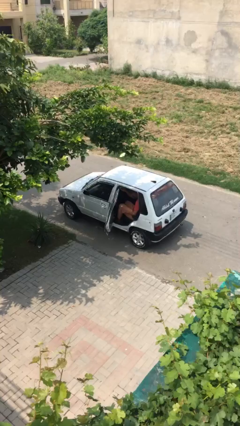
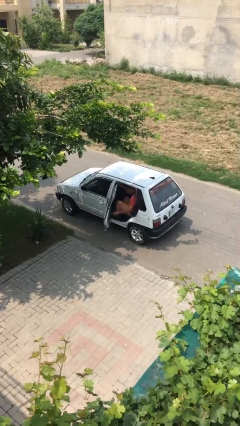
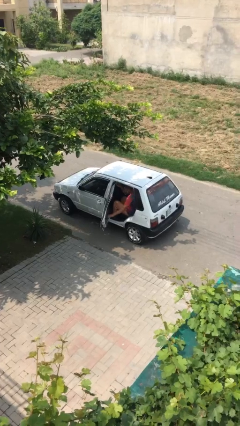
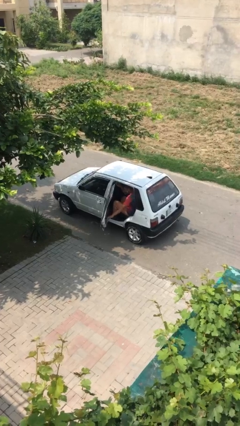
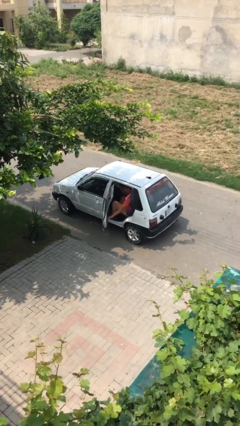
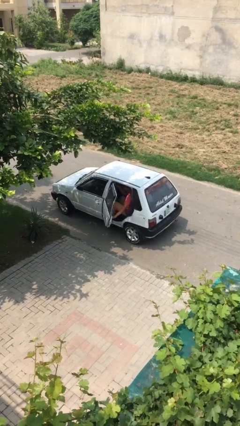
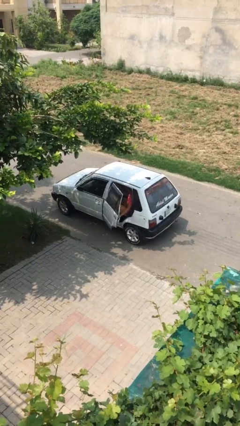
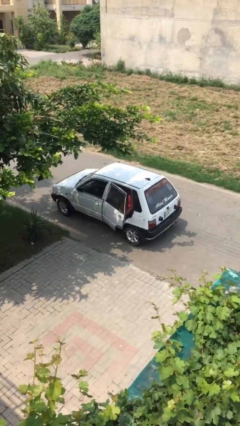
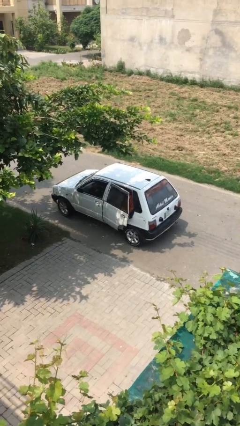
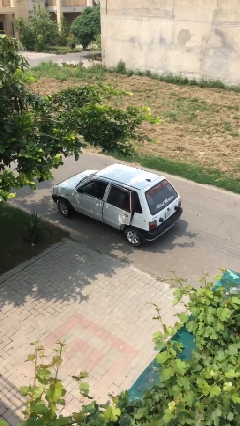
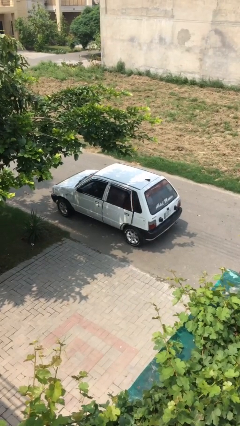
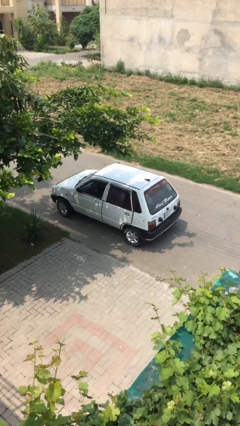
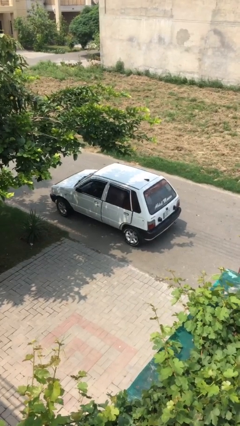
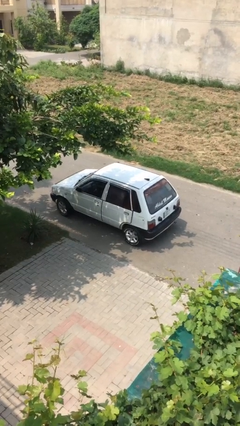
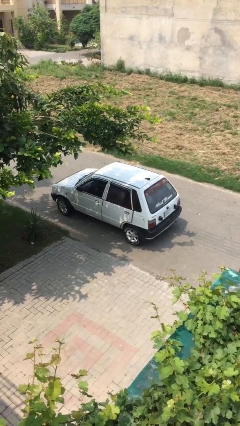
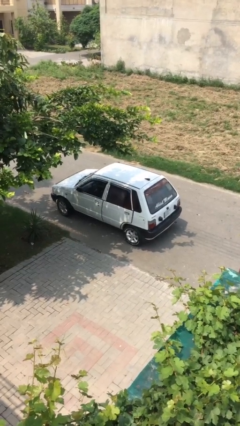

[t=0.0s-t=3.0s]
person closes car door

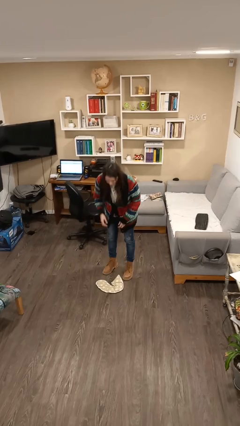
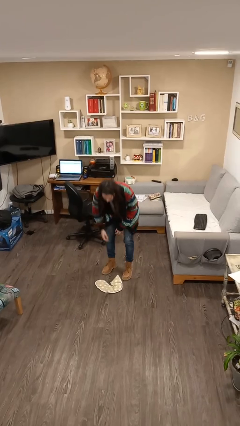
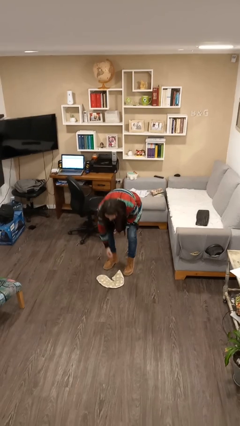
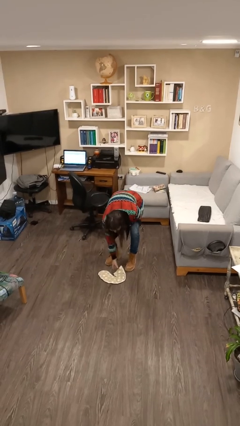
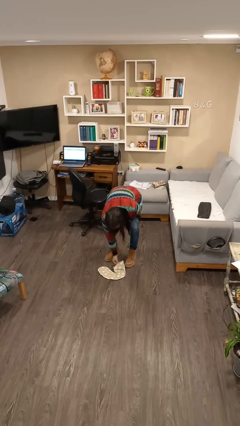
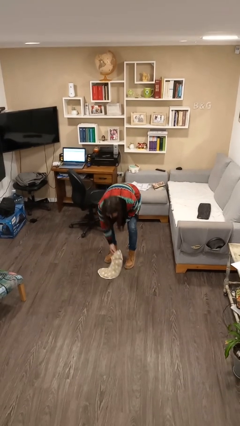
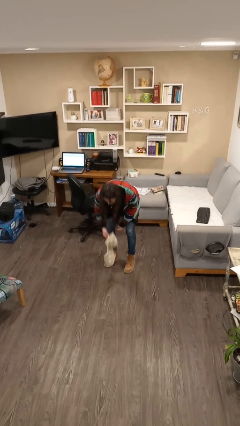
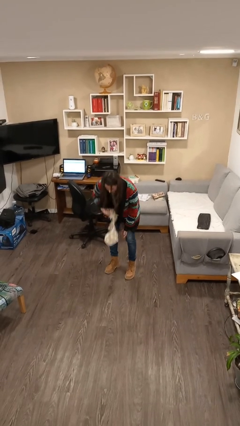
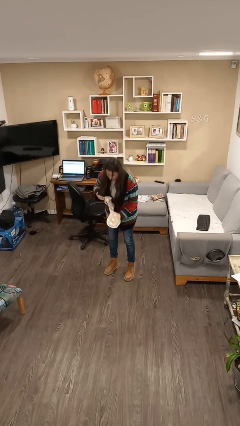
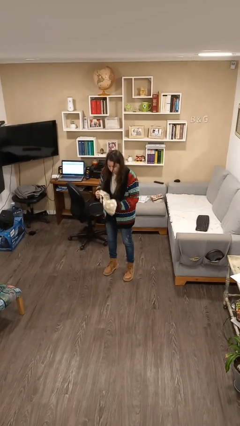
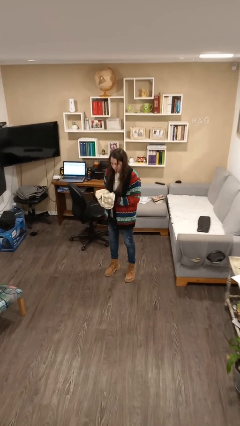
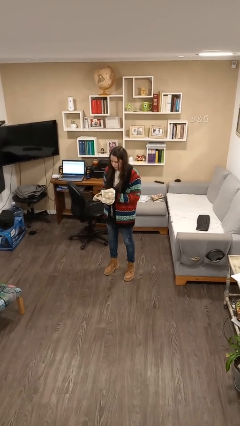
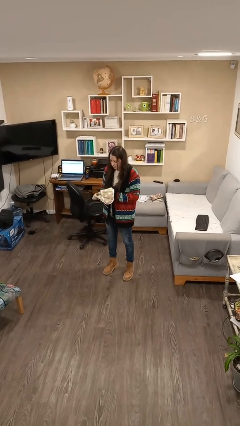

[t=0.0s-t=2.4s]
person picks up object from floor

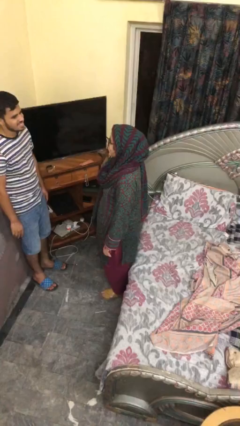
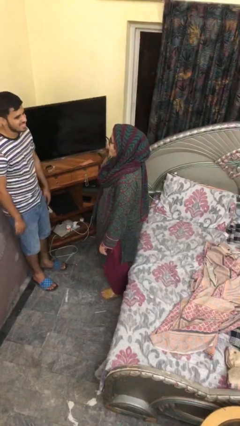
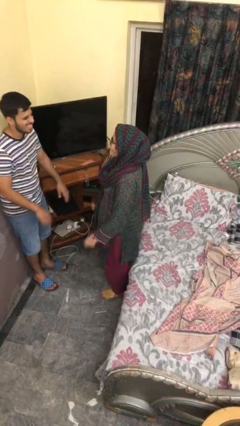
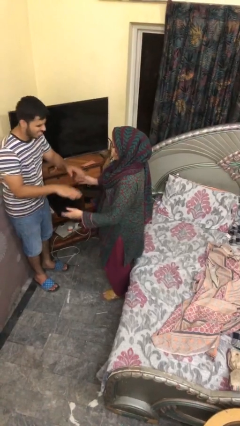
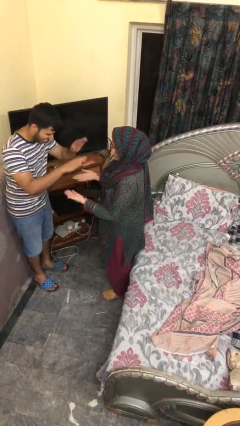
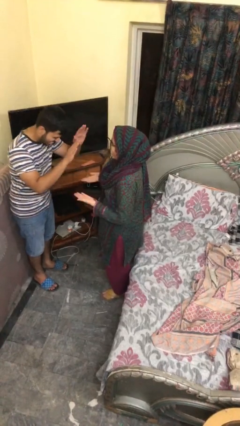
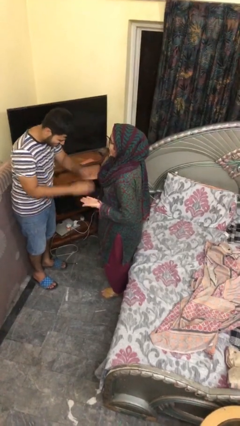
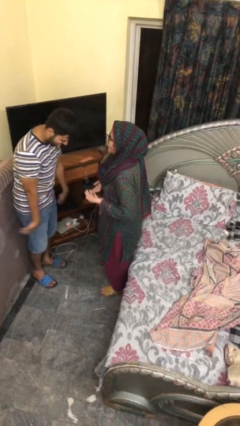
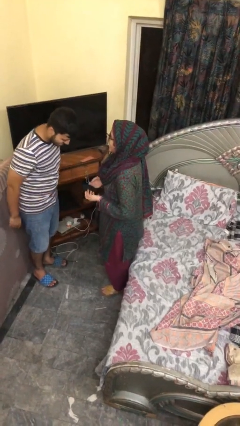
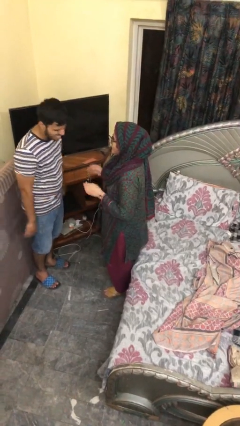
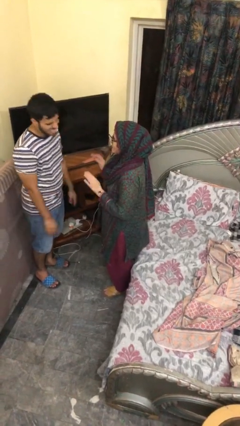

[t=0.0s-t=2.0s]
person laughs with person

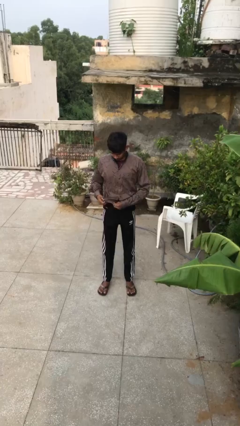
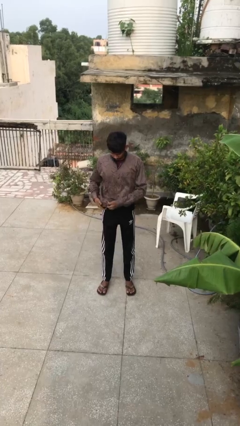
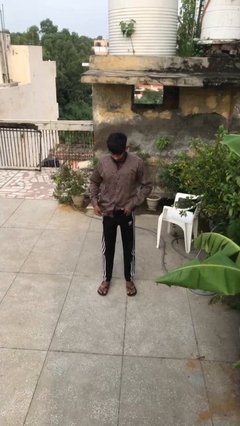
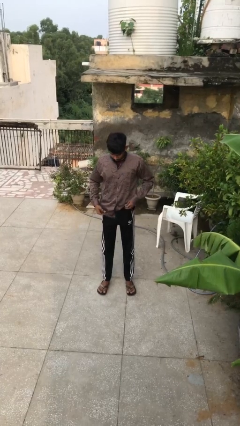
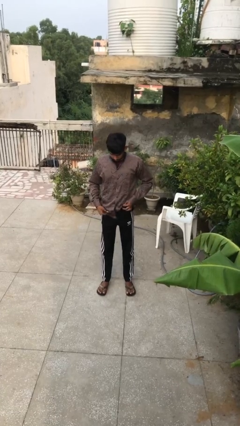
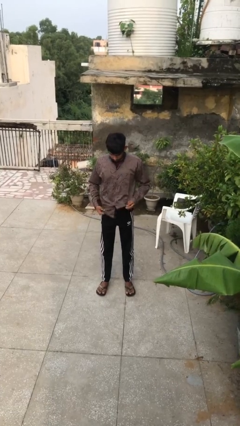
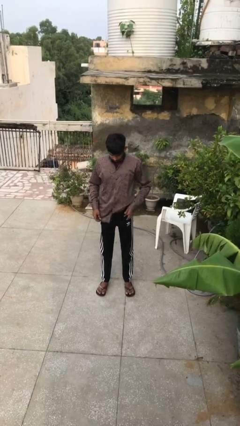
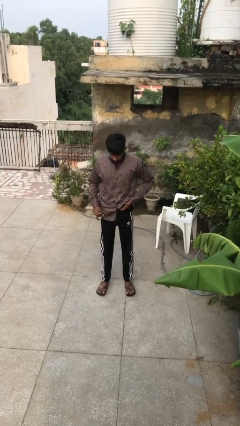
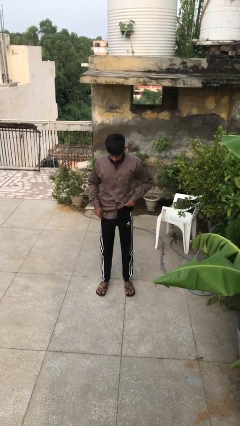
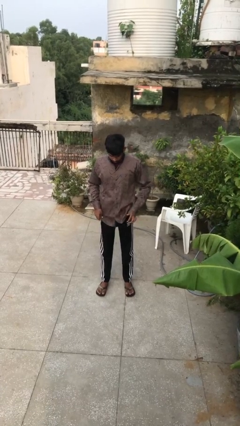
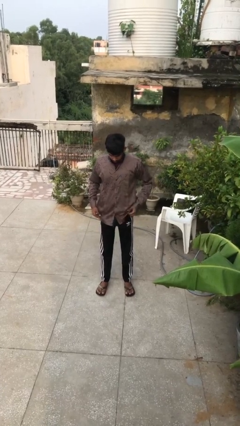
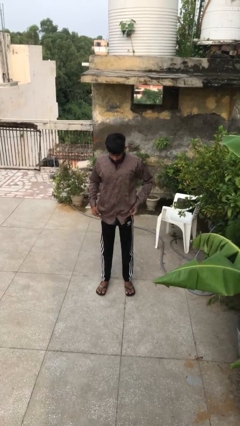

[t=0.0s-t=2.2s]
person untucks shirt

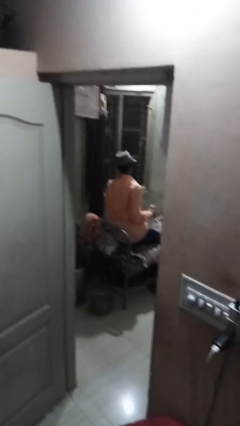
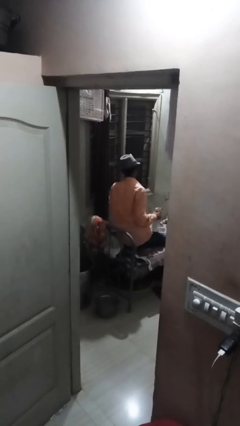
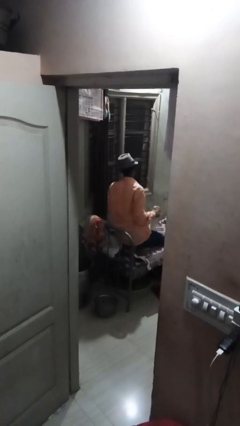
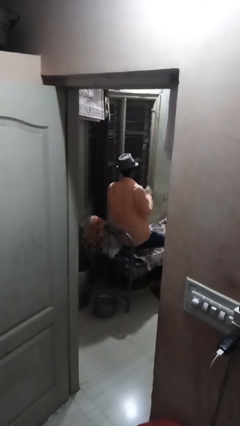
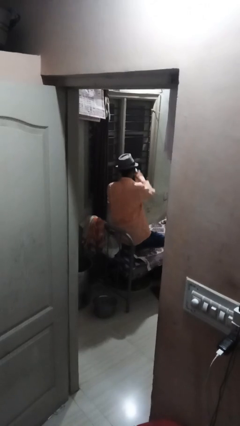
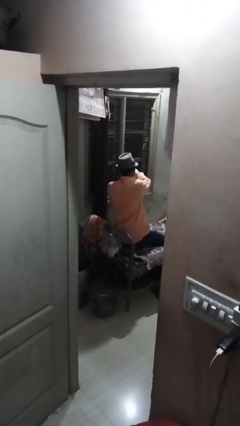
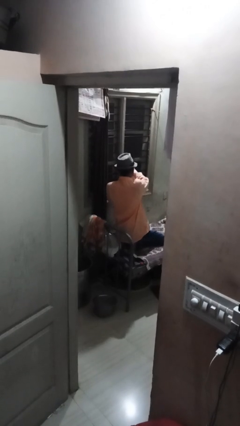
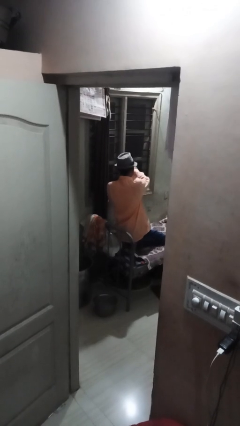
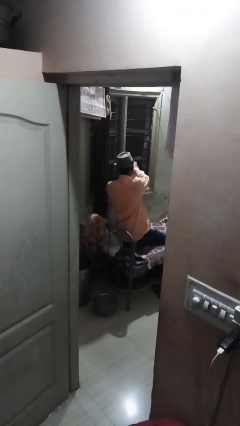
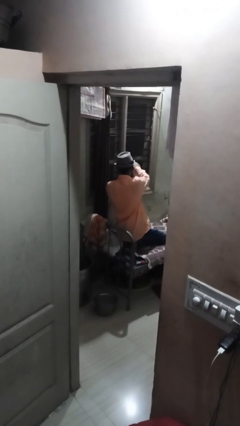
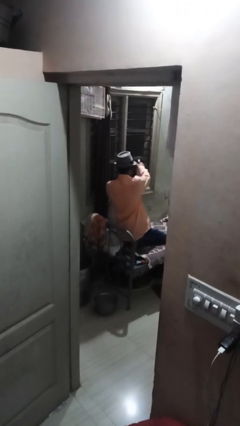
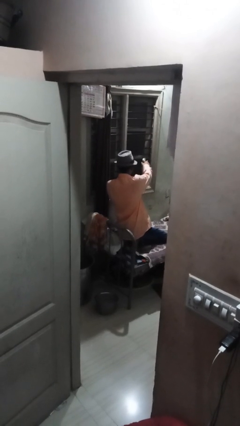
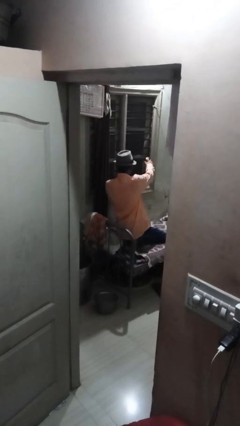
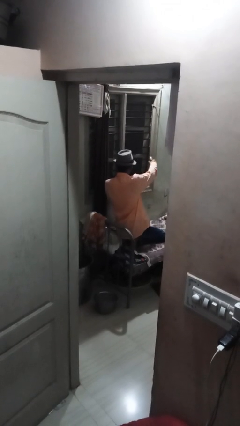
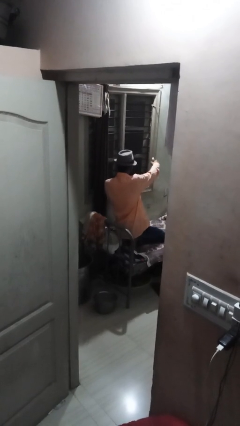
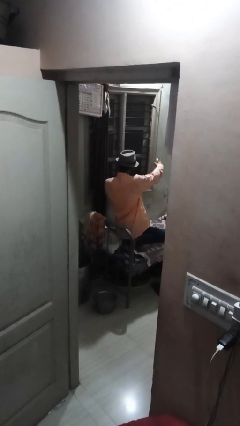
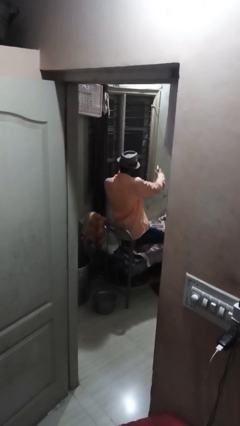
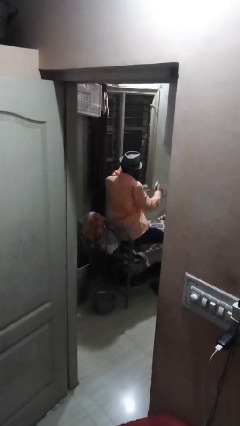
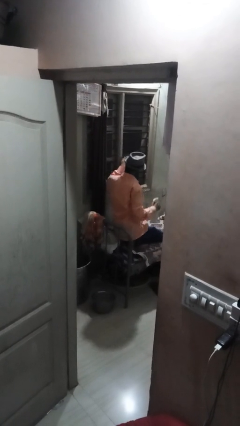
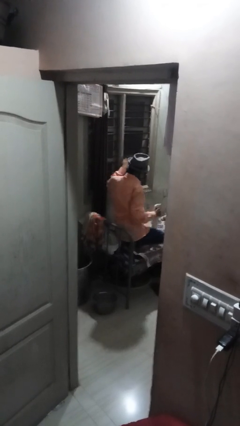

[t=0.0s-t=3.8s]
person sprays from bottle

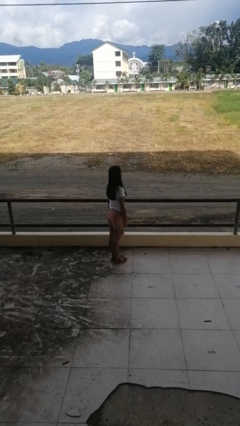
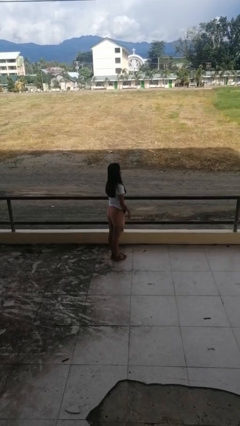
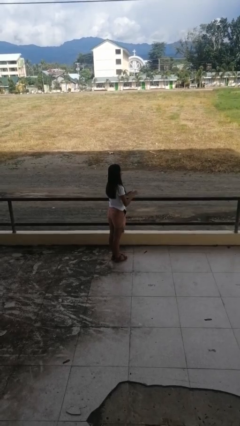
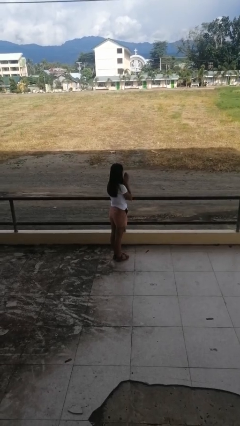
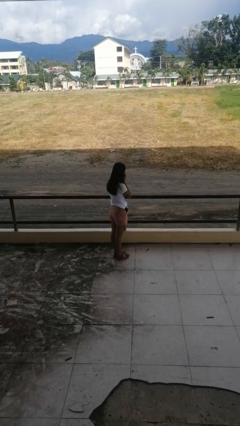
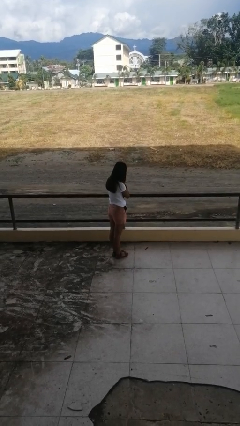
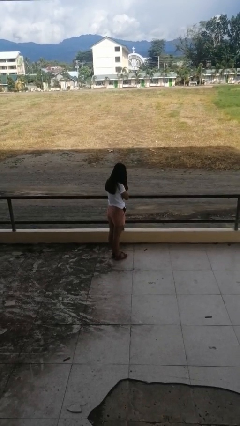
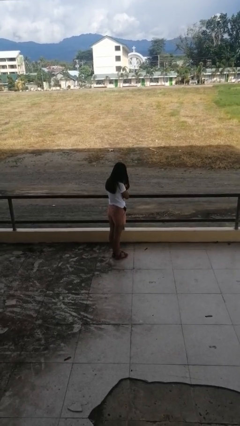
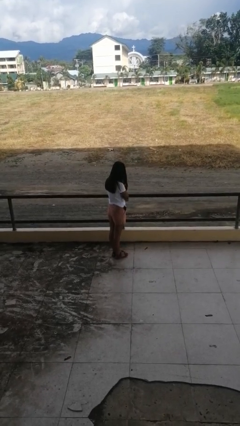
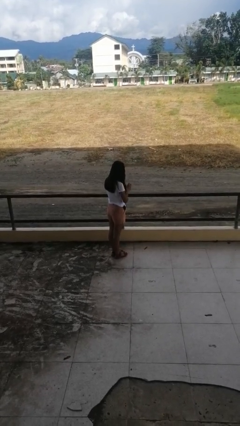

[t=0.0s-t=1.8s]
person sneezes into hand

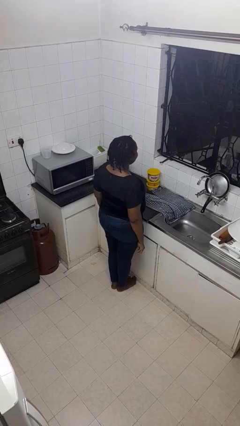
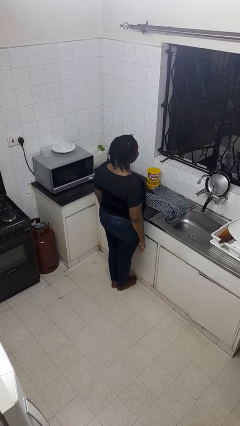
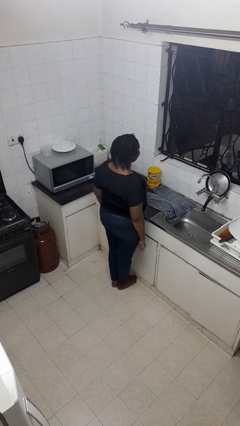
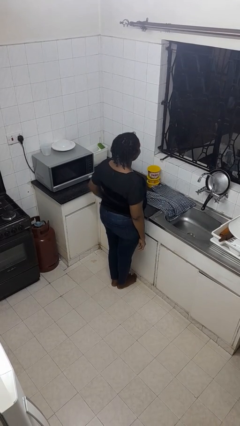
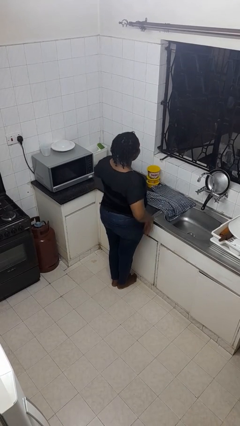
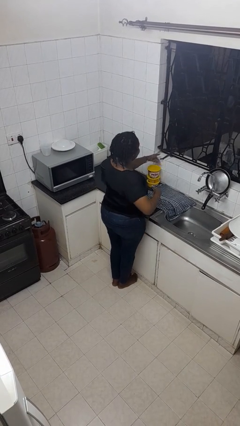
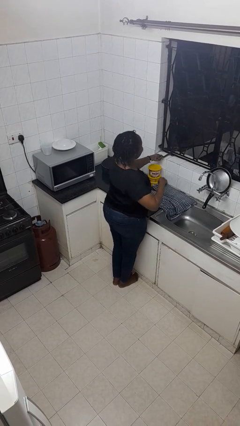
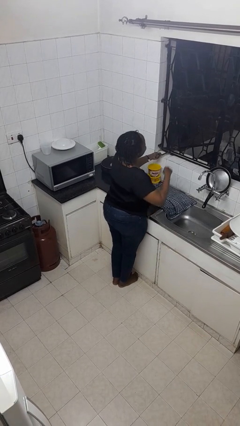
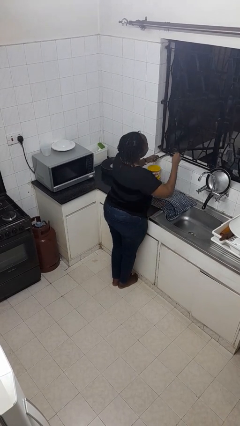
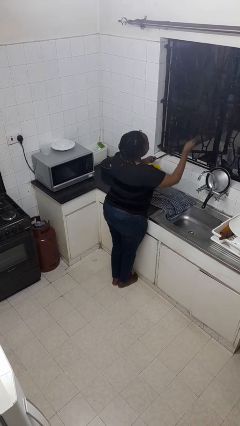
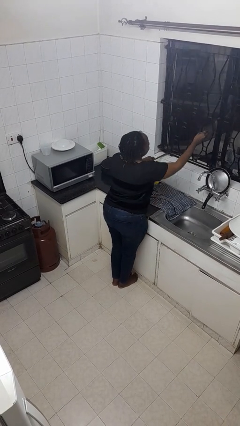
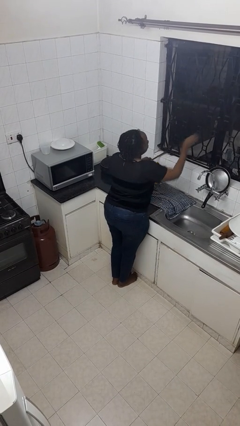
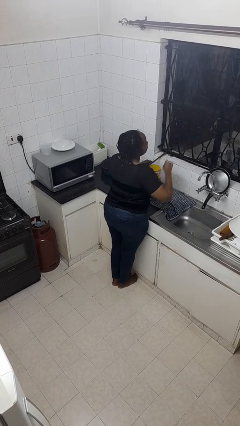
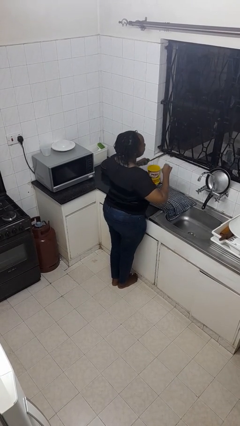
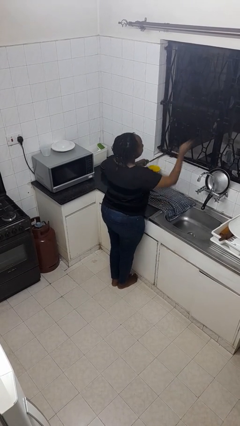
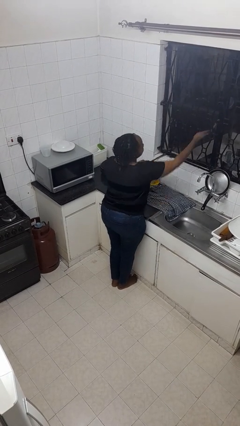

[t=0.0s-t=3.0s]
person closes home window
